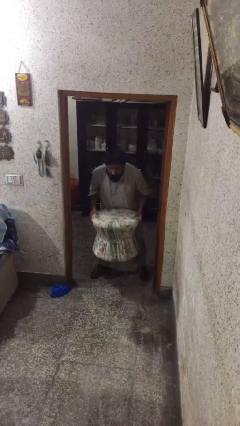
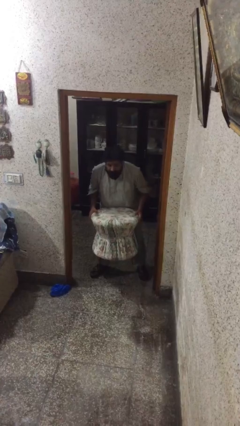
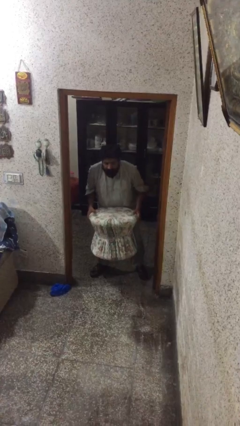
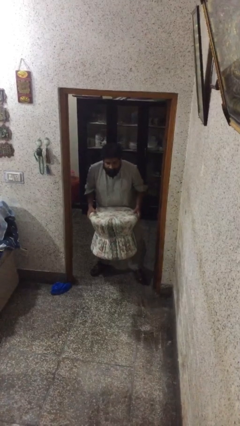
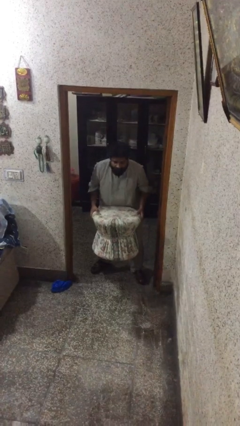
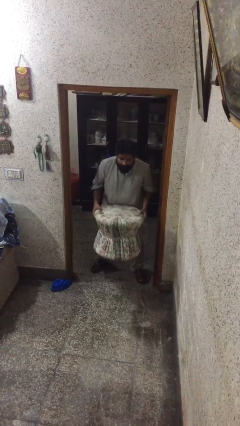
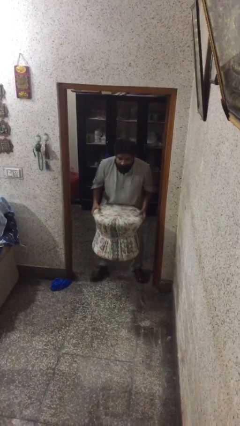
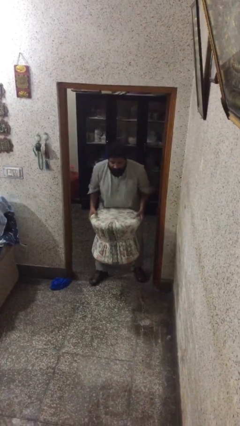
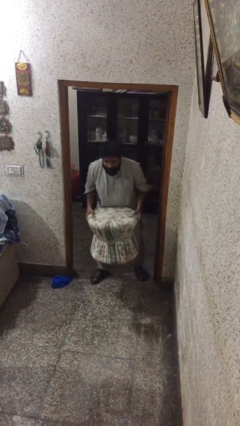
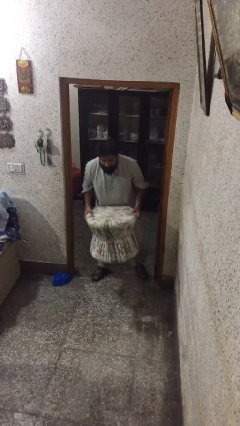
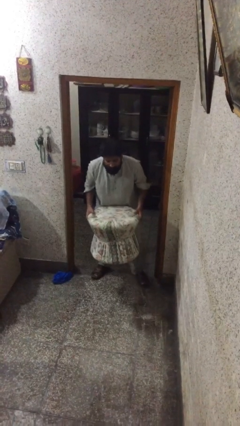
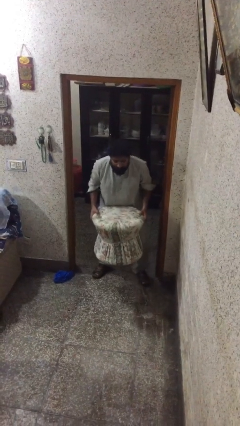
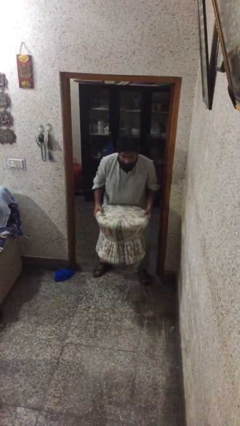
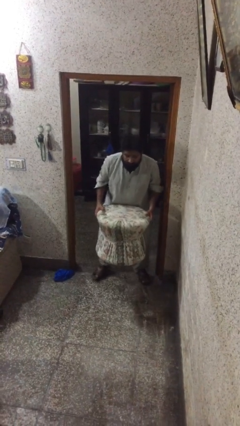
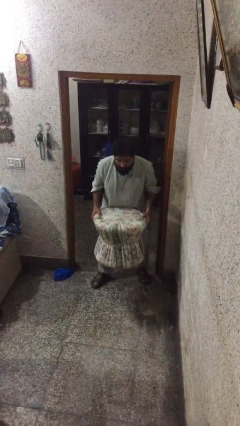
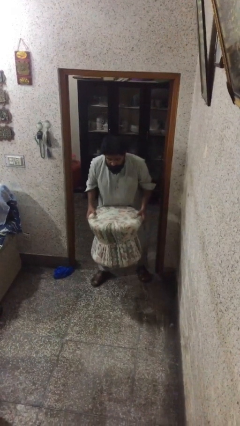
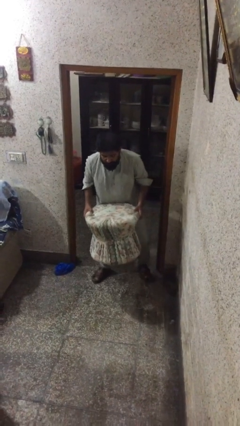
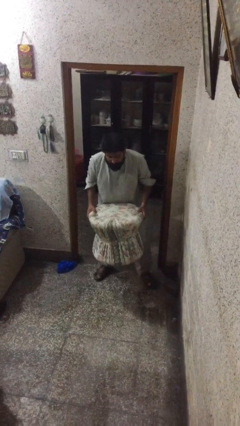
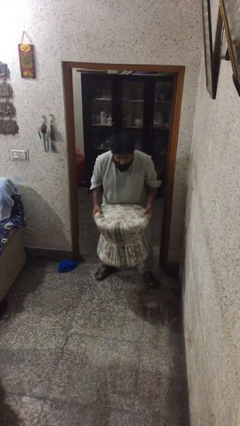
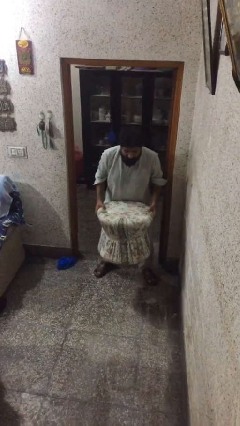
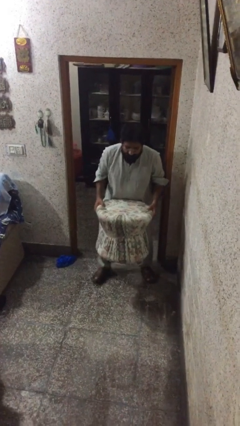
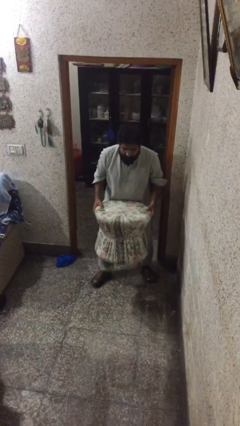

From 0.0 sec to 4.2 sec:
person carries heavy object

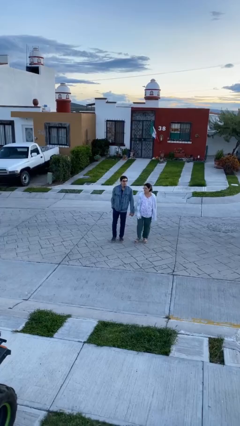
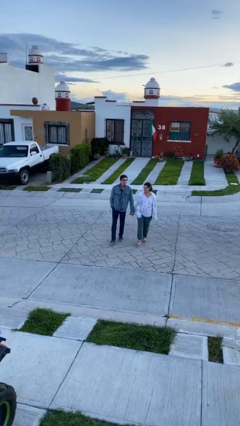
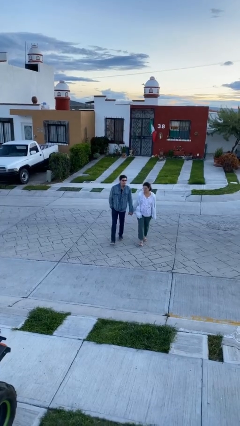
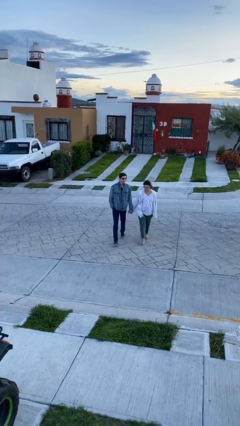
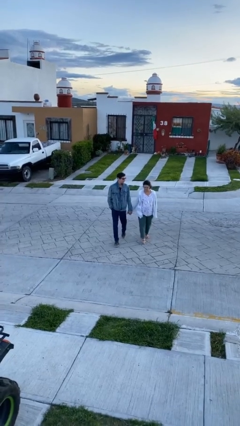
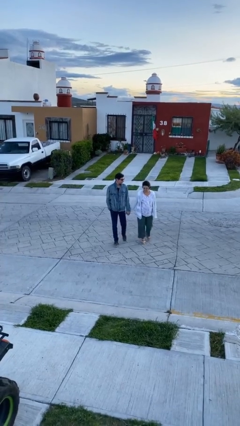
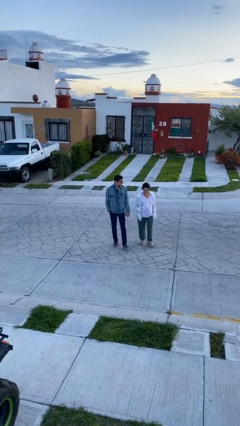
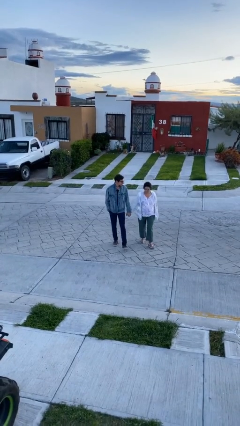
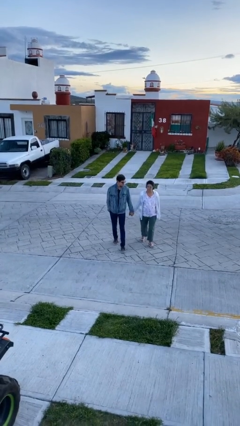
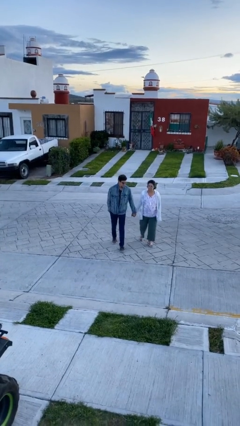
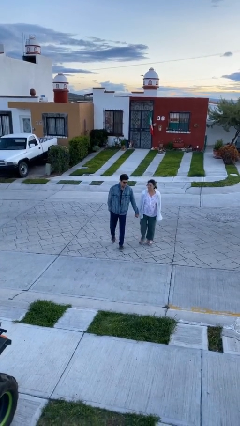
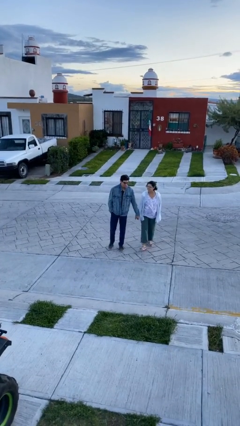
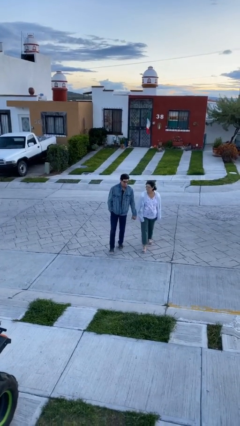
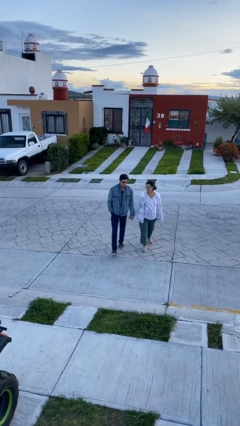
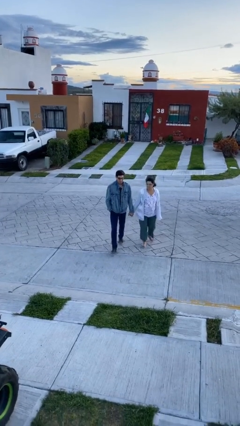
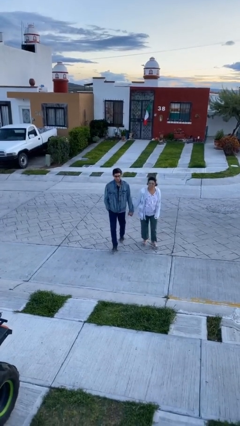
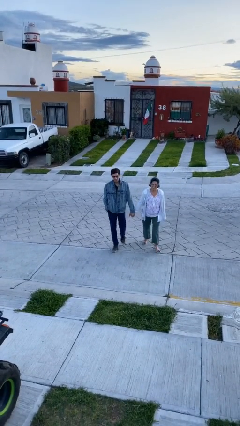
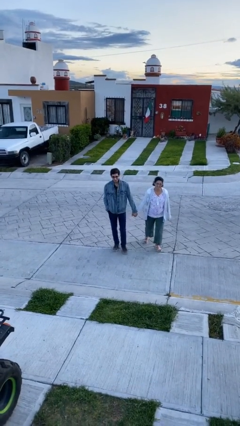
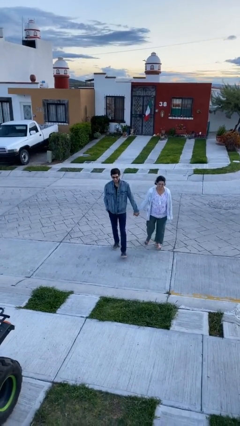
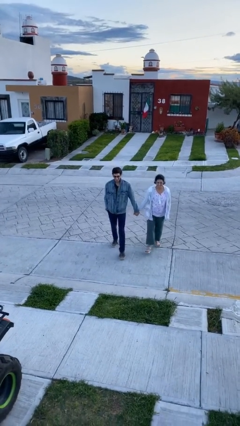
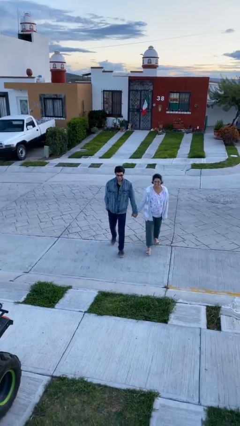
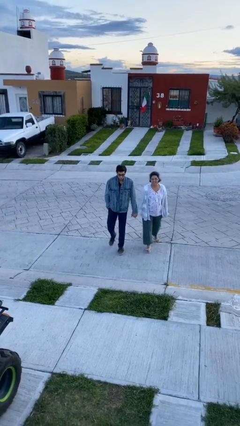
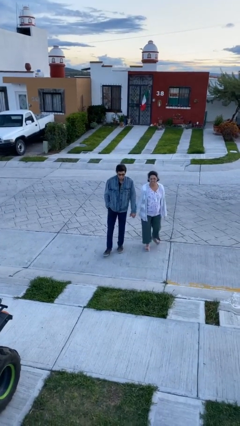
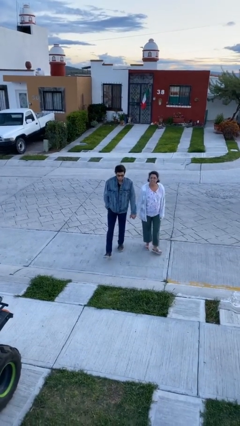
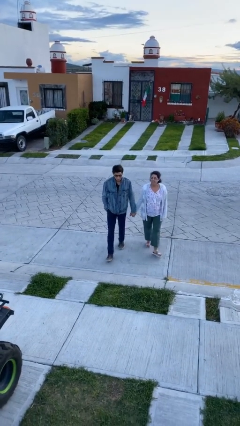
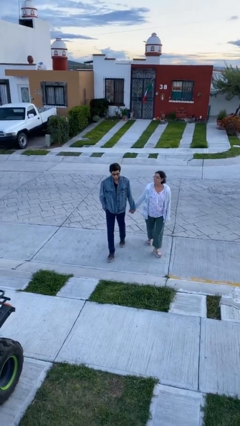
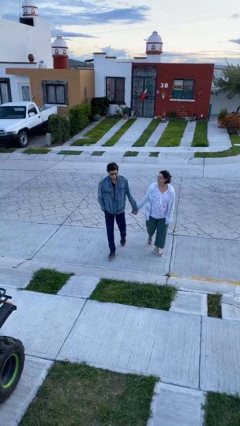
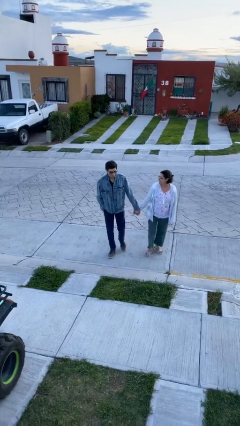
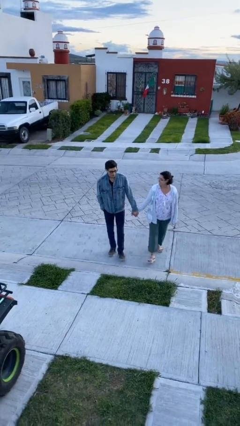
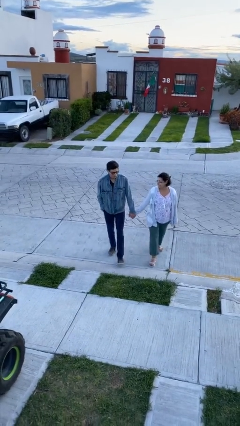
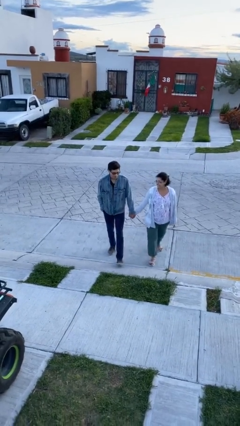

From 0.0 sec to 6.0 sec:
person holds hand

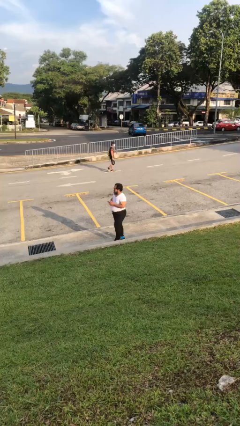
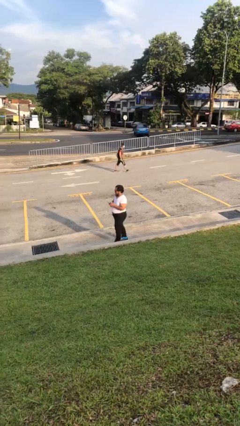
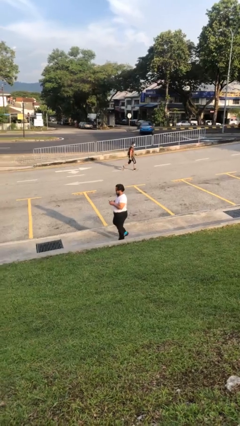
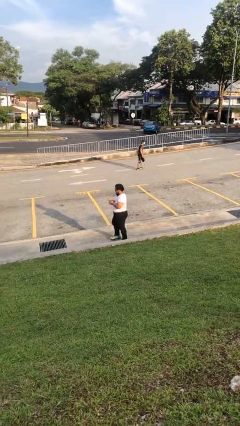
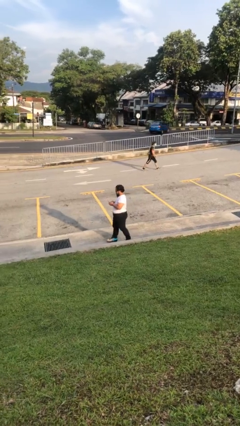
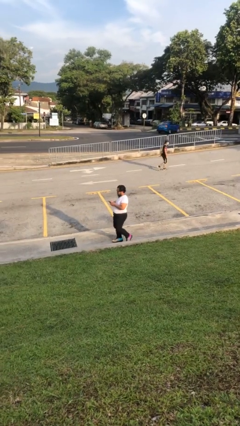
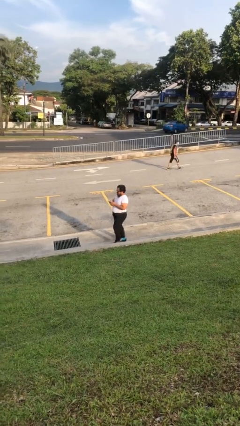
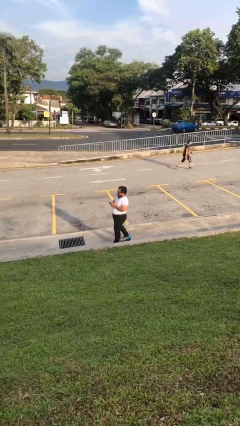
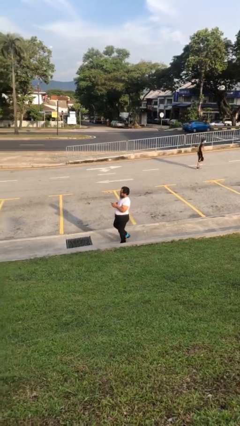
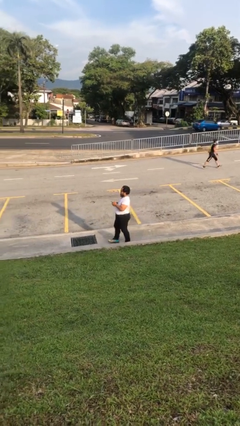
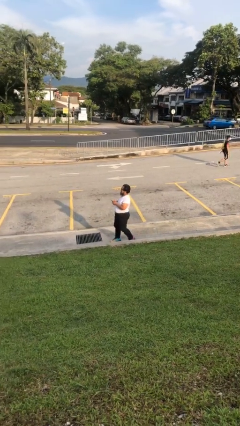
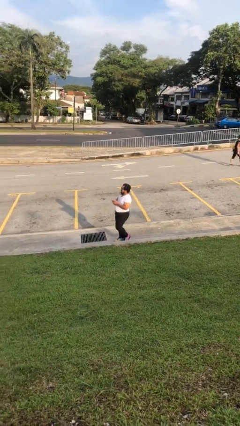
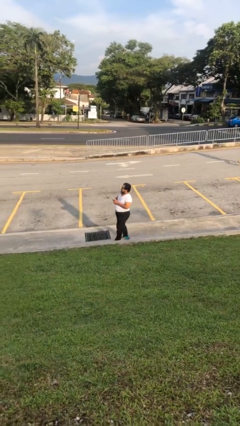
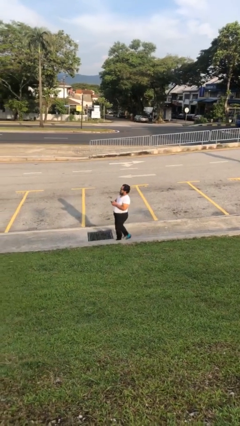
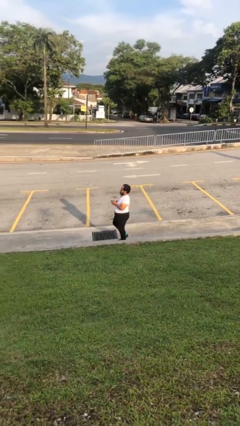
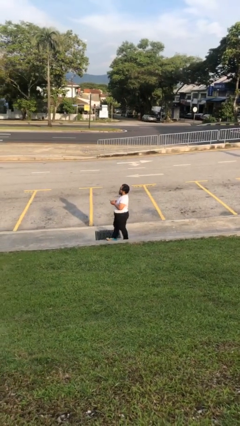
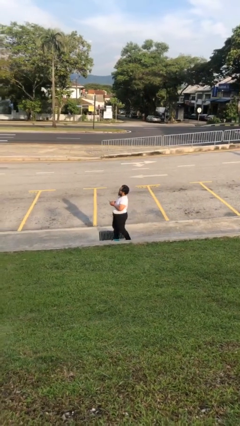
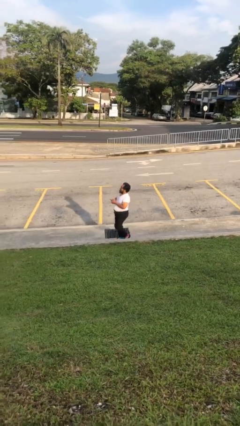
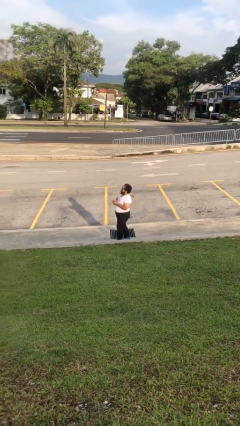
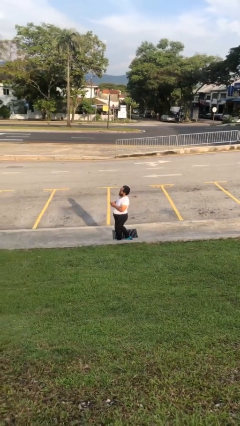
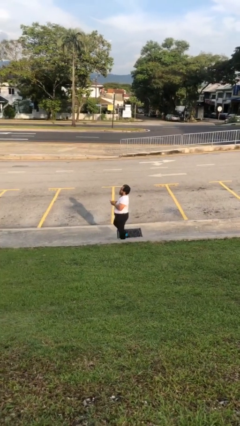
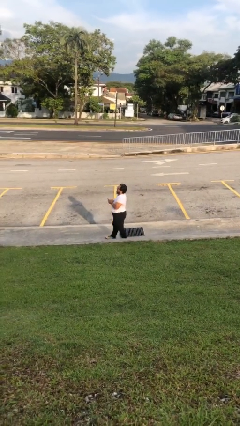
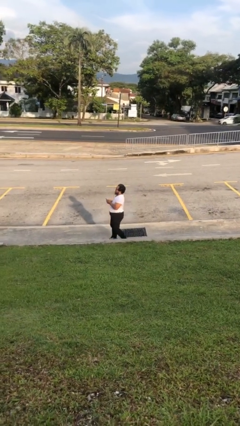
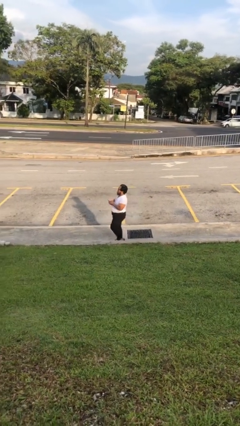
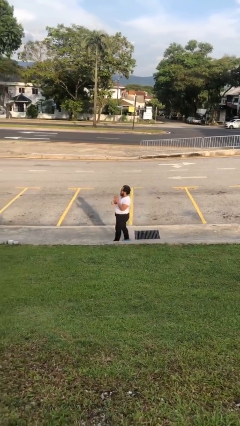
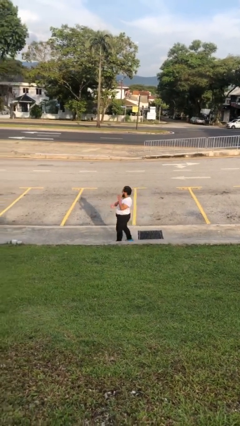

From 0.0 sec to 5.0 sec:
person texts on phone

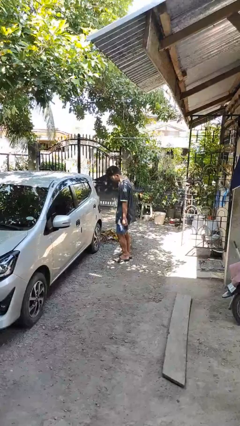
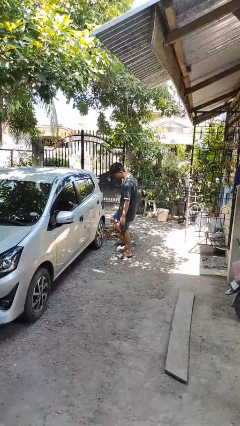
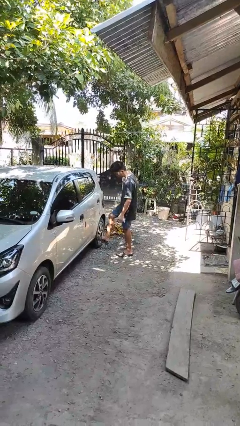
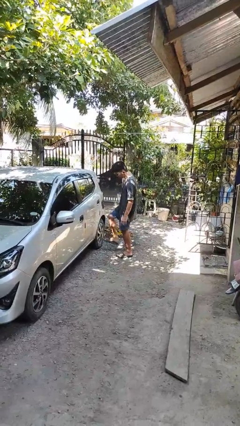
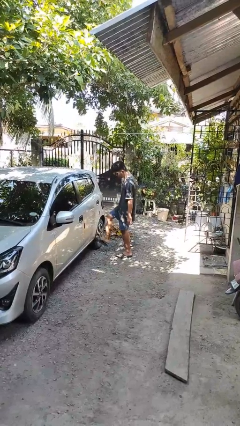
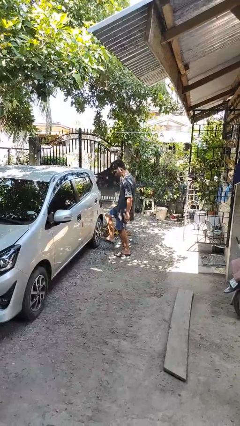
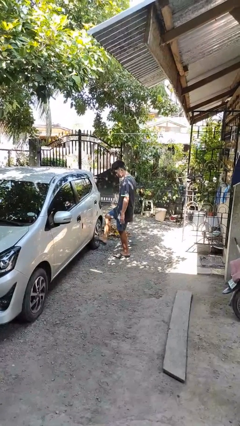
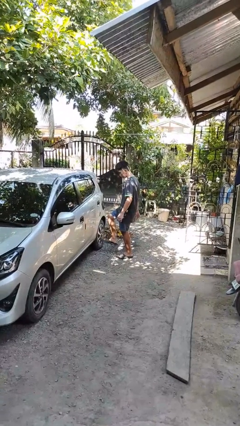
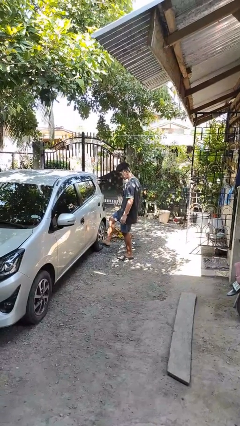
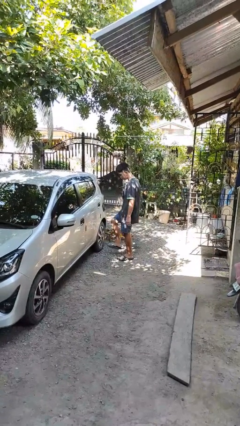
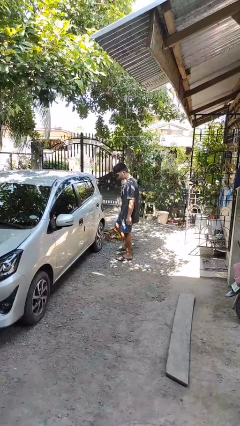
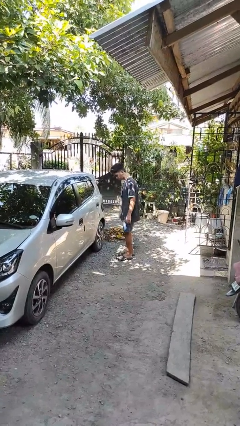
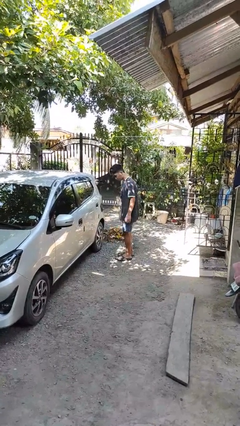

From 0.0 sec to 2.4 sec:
person kicks car tires
